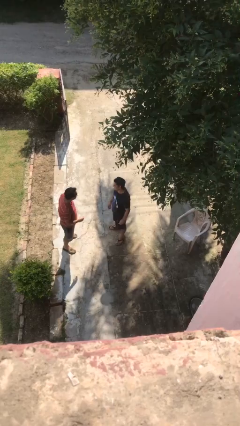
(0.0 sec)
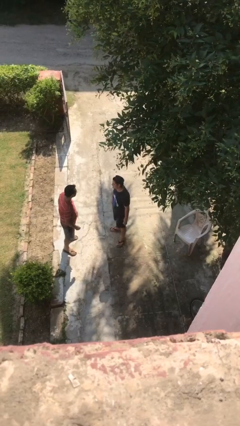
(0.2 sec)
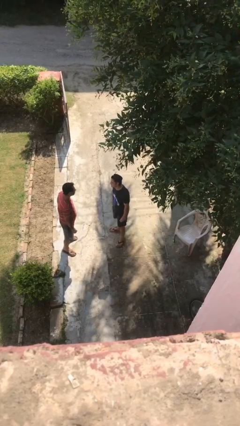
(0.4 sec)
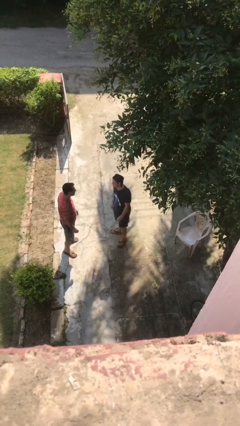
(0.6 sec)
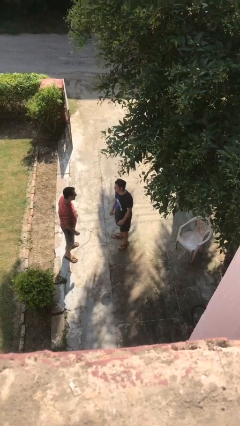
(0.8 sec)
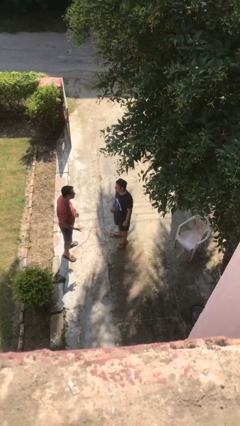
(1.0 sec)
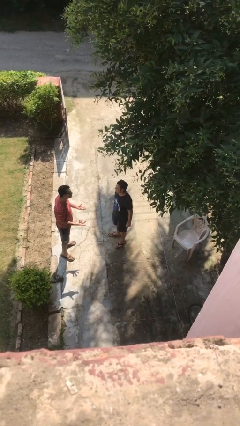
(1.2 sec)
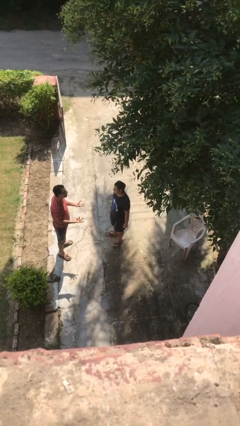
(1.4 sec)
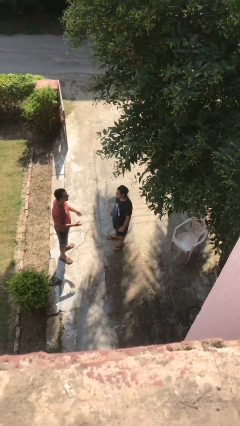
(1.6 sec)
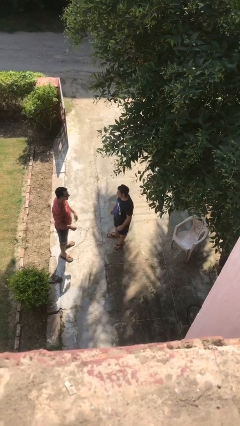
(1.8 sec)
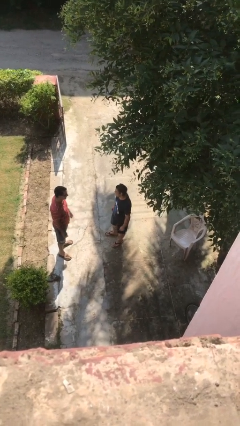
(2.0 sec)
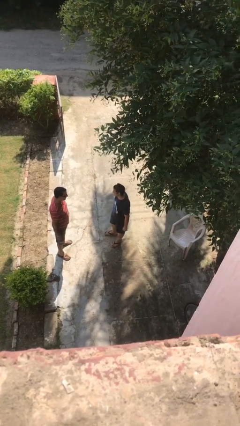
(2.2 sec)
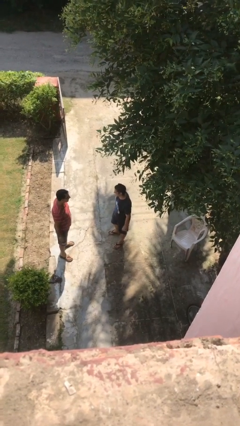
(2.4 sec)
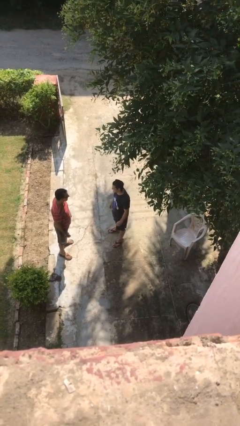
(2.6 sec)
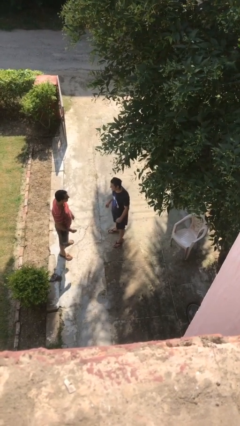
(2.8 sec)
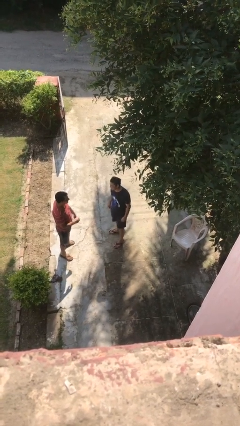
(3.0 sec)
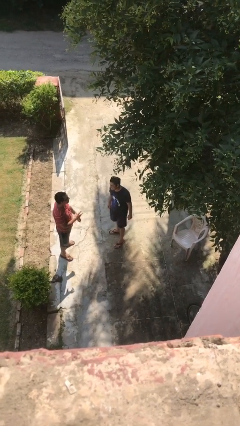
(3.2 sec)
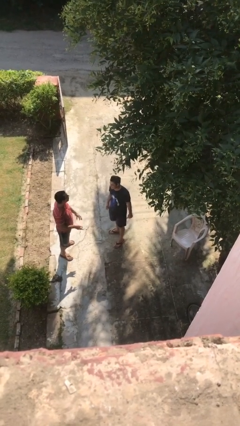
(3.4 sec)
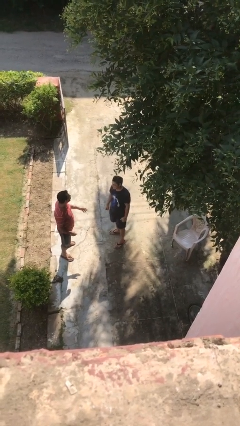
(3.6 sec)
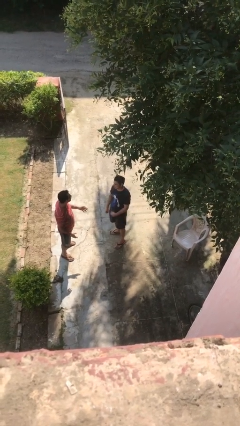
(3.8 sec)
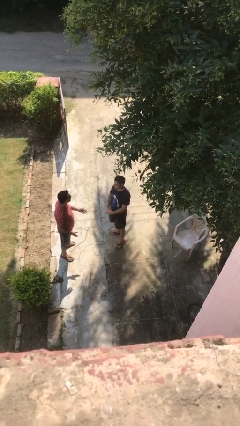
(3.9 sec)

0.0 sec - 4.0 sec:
person talks to person

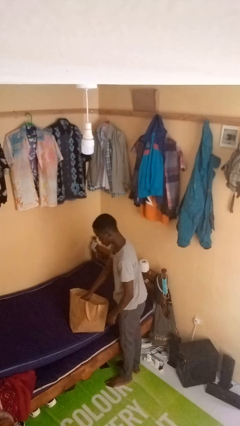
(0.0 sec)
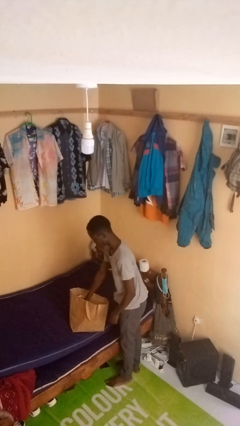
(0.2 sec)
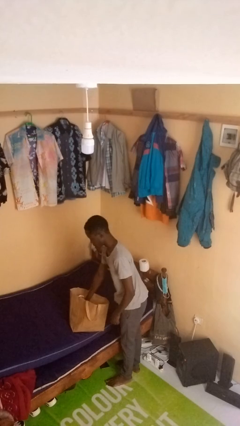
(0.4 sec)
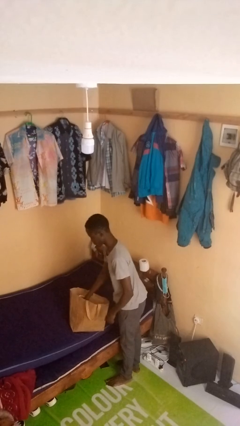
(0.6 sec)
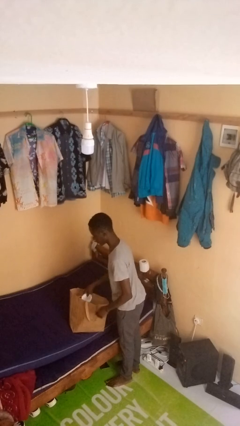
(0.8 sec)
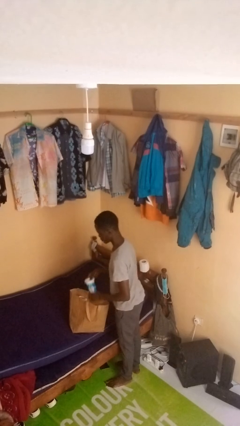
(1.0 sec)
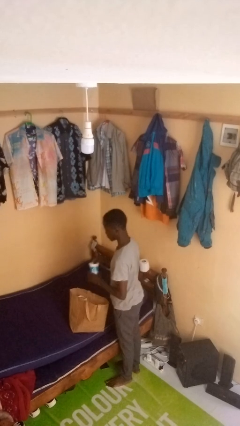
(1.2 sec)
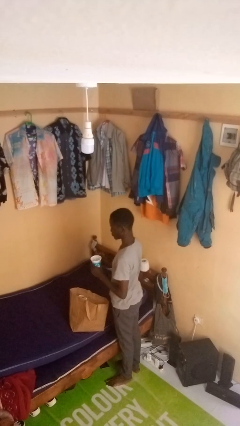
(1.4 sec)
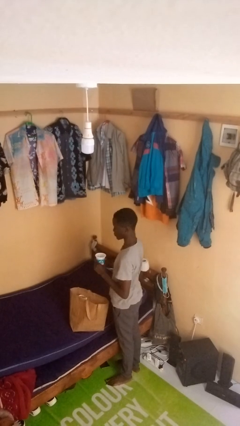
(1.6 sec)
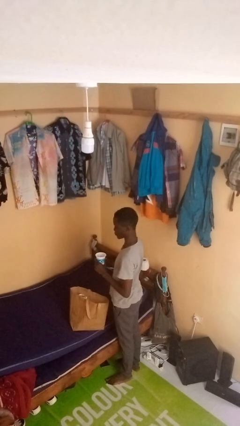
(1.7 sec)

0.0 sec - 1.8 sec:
person takes object from bag

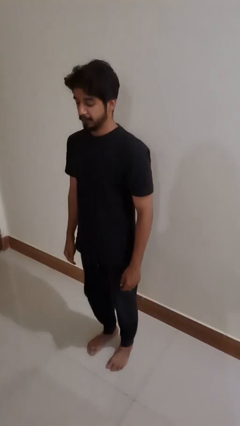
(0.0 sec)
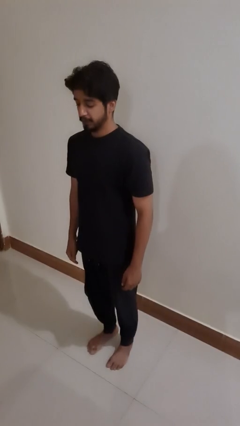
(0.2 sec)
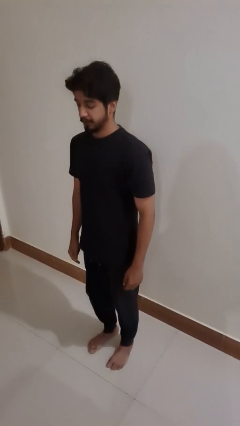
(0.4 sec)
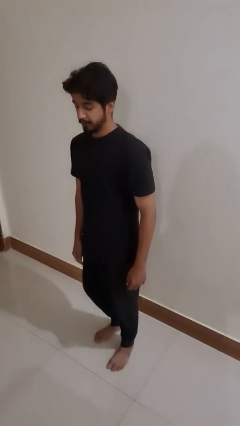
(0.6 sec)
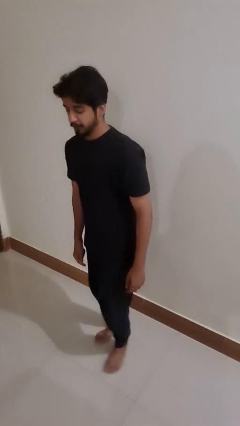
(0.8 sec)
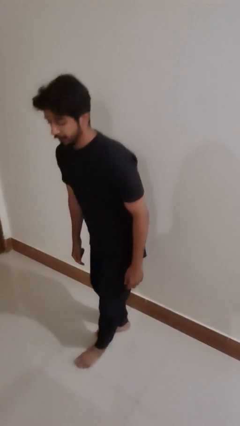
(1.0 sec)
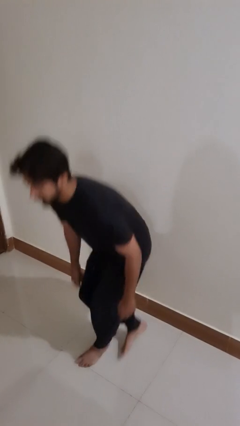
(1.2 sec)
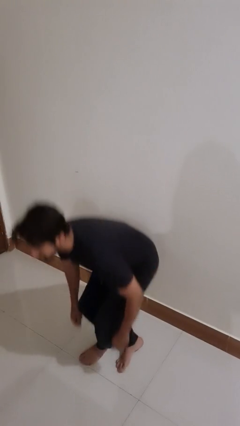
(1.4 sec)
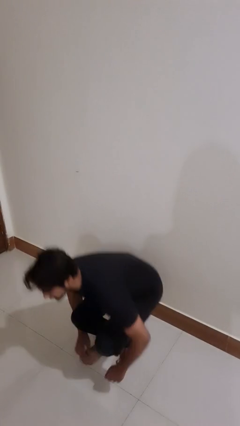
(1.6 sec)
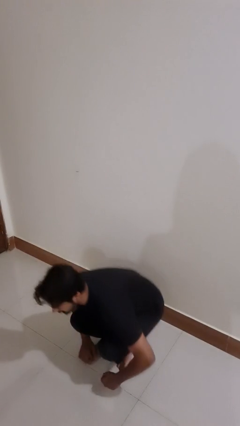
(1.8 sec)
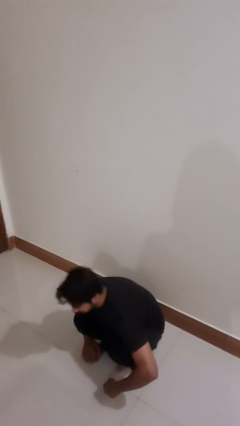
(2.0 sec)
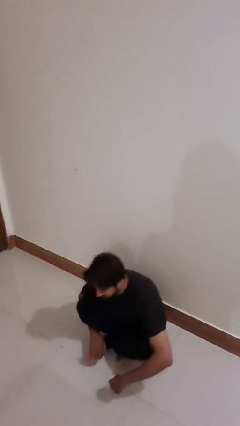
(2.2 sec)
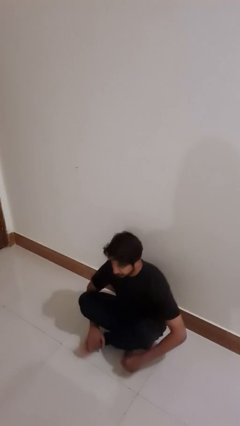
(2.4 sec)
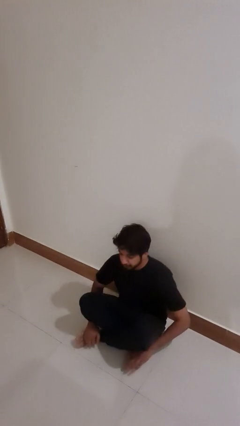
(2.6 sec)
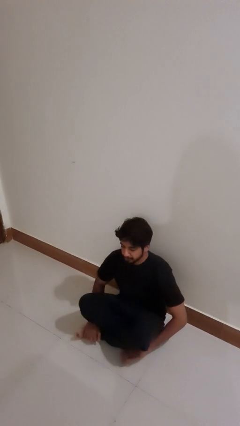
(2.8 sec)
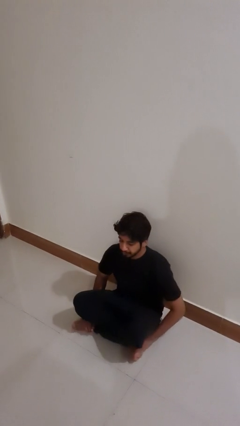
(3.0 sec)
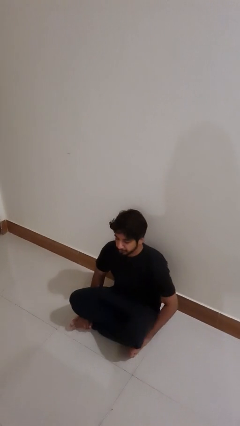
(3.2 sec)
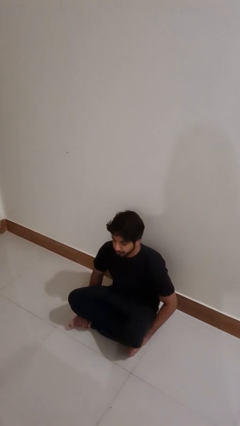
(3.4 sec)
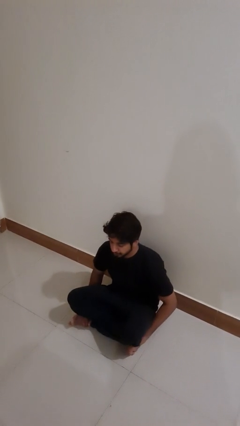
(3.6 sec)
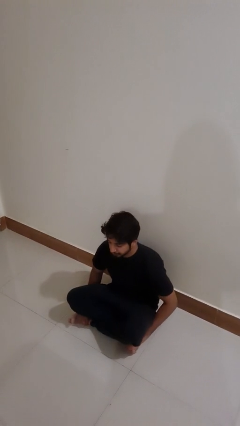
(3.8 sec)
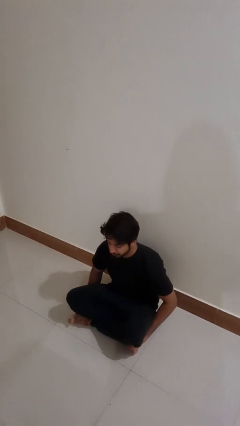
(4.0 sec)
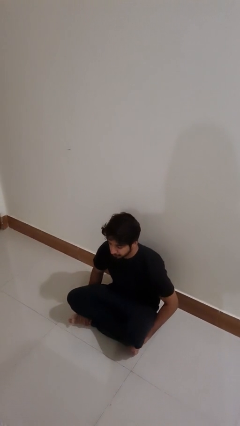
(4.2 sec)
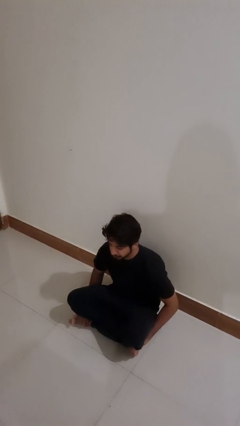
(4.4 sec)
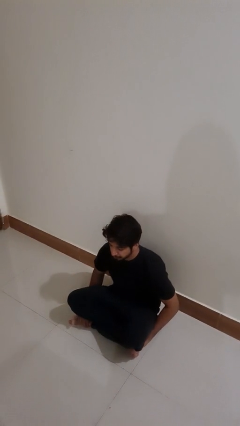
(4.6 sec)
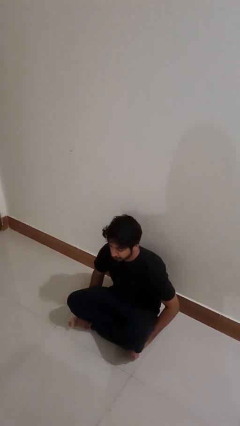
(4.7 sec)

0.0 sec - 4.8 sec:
person sits crisscross

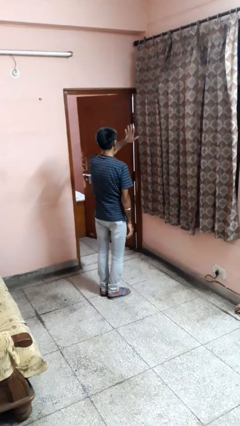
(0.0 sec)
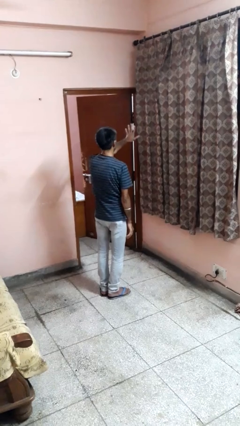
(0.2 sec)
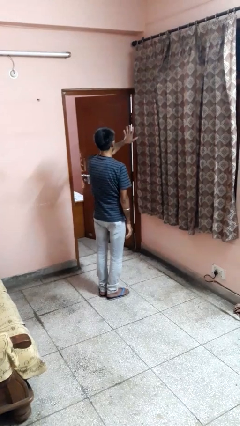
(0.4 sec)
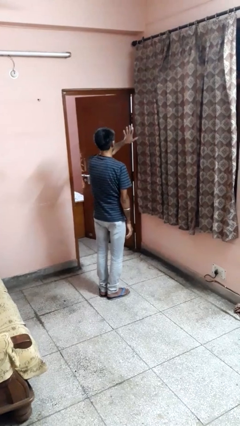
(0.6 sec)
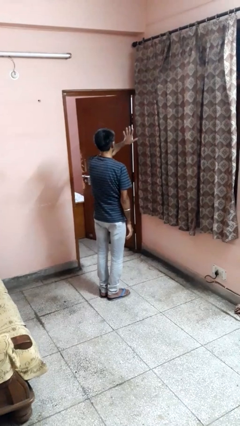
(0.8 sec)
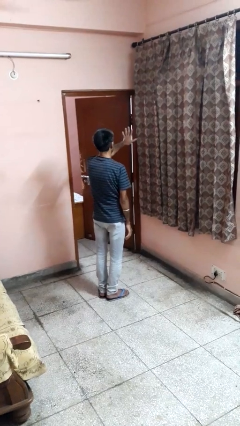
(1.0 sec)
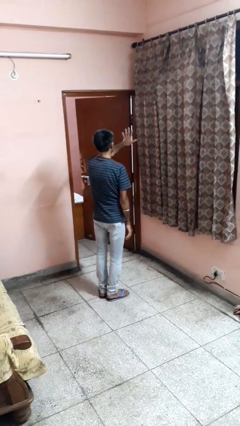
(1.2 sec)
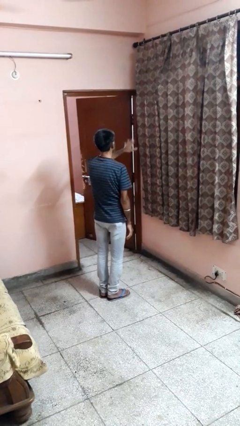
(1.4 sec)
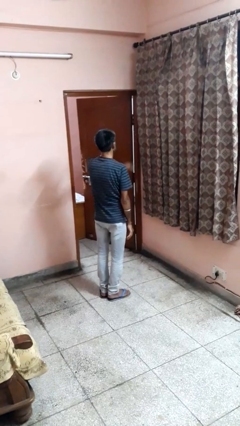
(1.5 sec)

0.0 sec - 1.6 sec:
person gestures number five

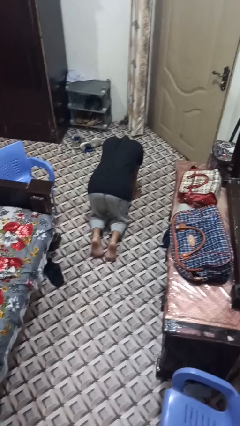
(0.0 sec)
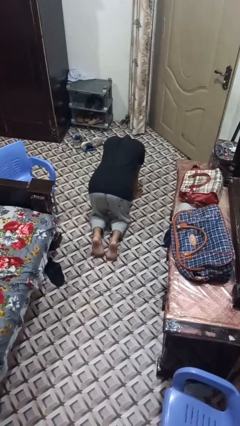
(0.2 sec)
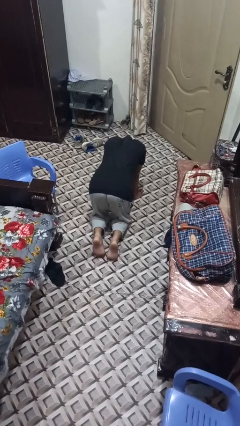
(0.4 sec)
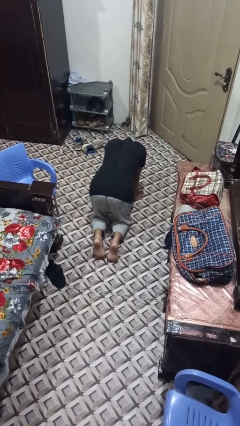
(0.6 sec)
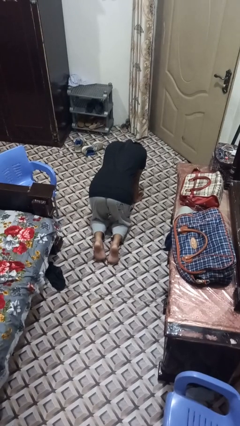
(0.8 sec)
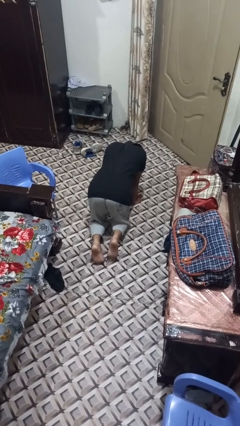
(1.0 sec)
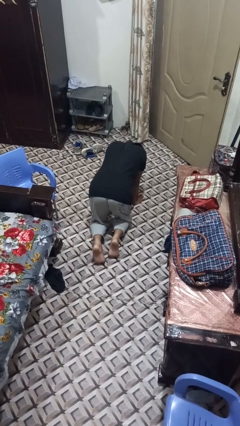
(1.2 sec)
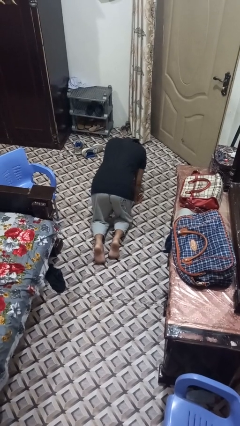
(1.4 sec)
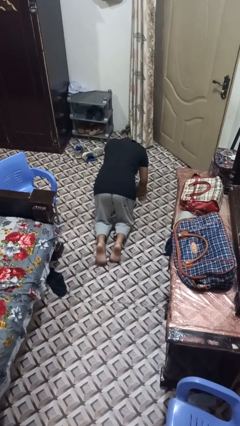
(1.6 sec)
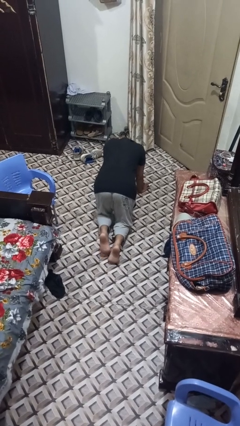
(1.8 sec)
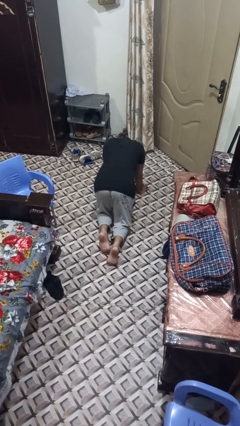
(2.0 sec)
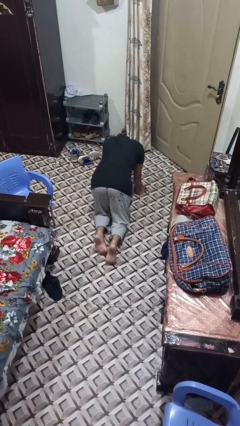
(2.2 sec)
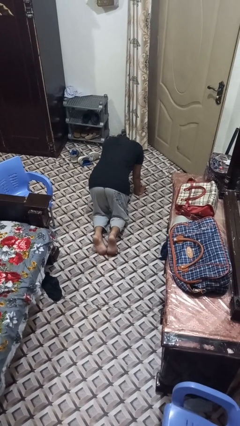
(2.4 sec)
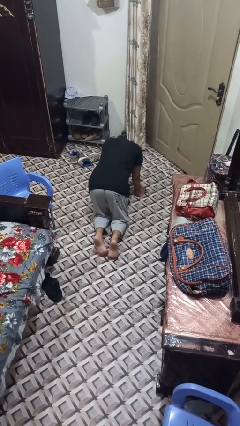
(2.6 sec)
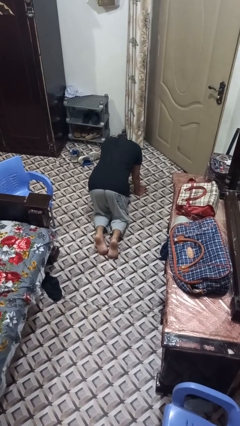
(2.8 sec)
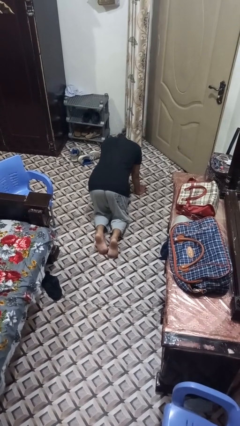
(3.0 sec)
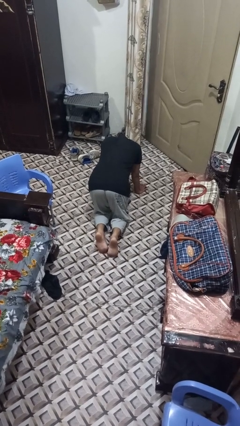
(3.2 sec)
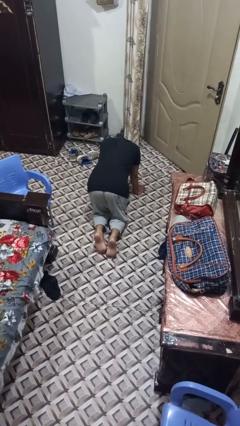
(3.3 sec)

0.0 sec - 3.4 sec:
person crawls

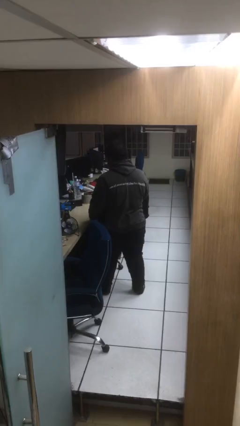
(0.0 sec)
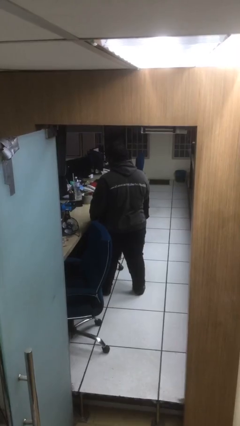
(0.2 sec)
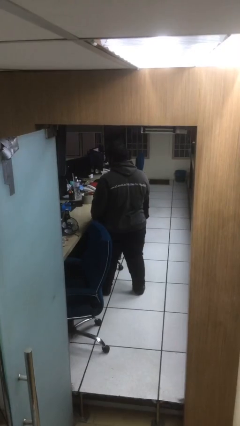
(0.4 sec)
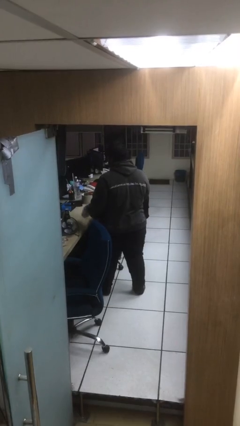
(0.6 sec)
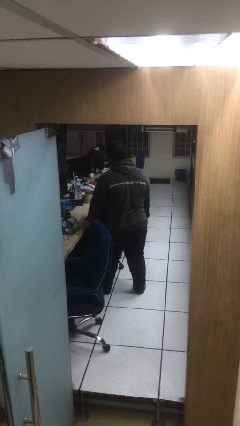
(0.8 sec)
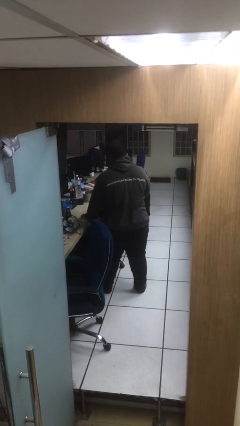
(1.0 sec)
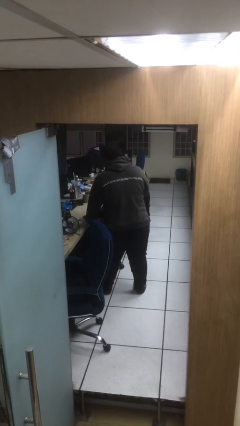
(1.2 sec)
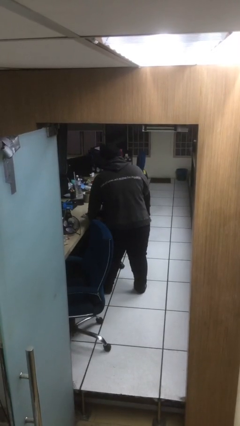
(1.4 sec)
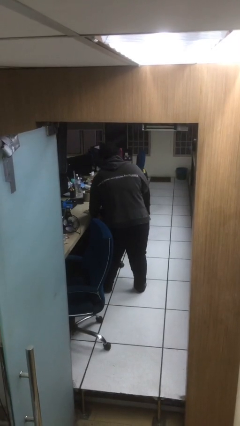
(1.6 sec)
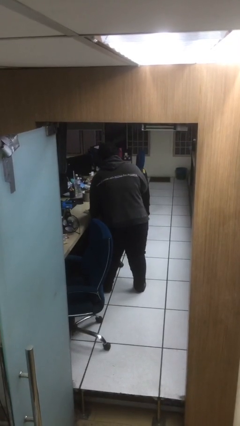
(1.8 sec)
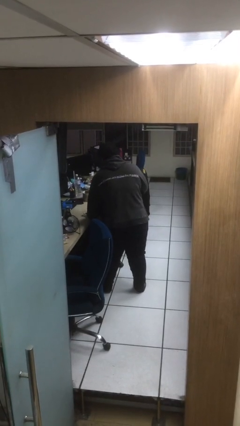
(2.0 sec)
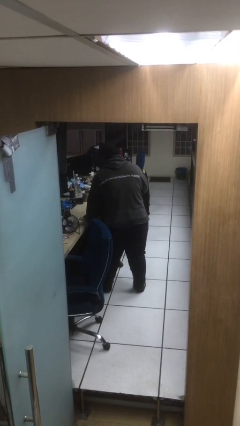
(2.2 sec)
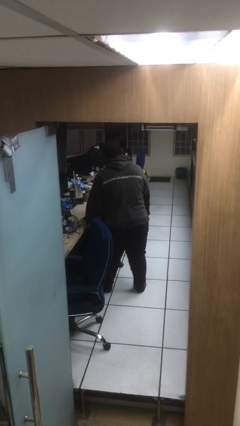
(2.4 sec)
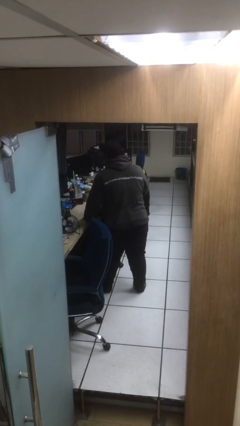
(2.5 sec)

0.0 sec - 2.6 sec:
person cleans table with rag
